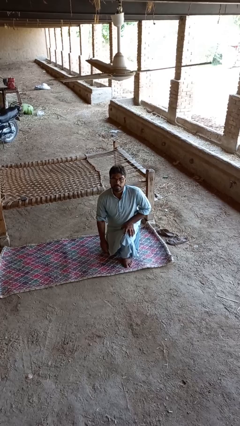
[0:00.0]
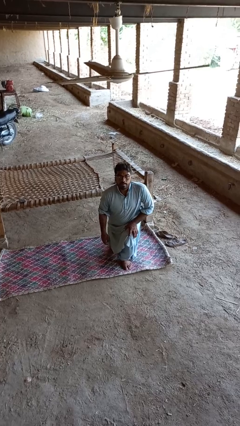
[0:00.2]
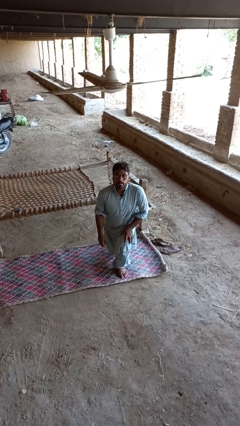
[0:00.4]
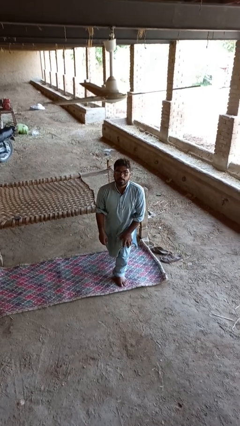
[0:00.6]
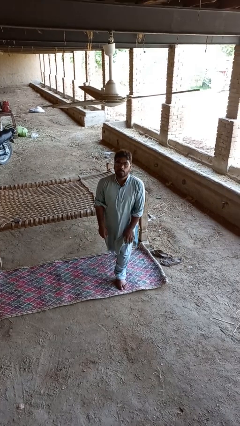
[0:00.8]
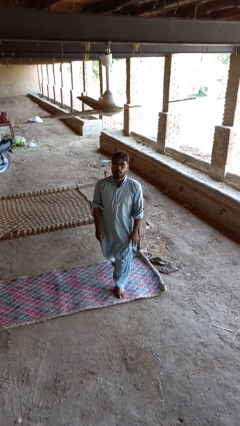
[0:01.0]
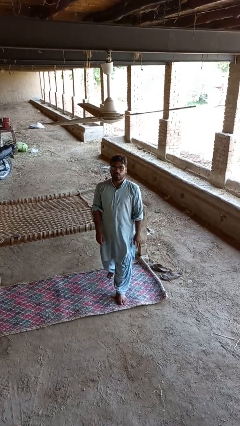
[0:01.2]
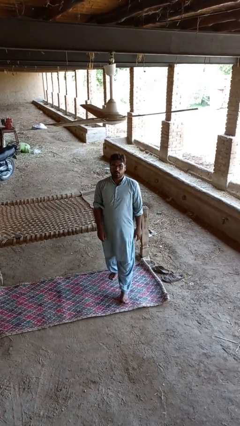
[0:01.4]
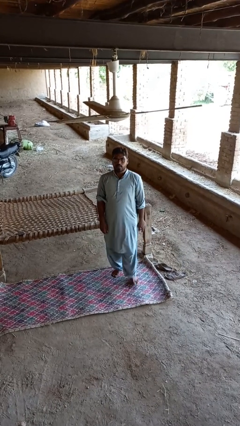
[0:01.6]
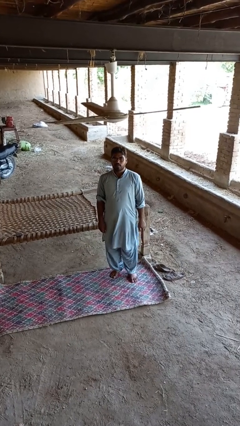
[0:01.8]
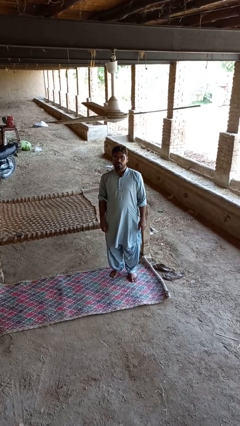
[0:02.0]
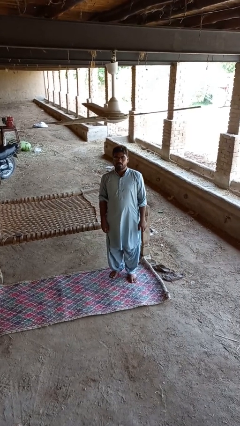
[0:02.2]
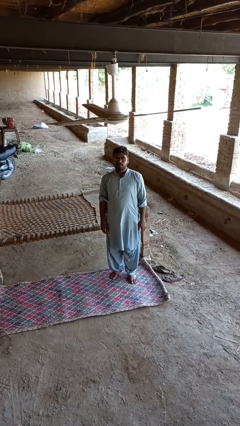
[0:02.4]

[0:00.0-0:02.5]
person stands up from floor

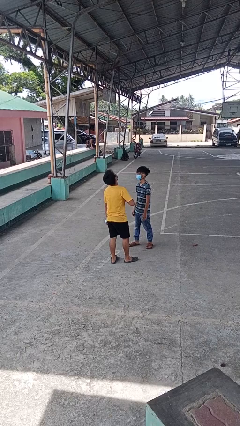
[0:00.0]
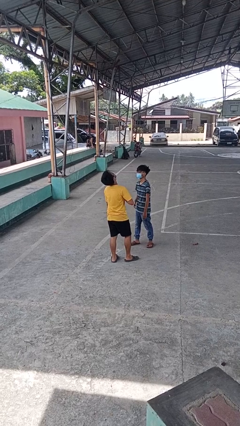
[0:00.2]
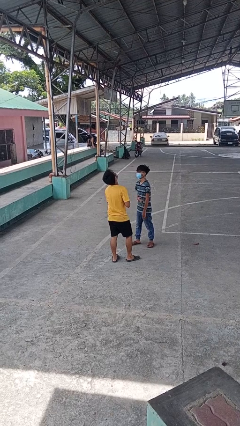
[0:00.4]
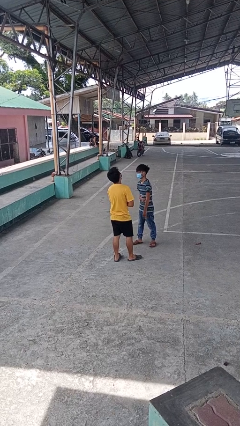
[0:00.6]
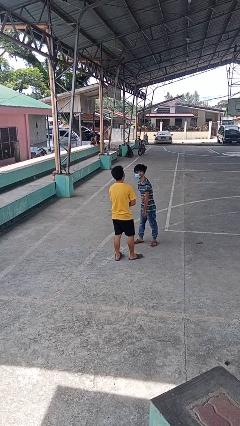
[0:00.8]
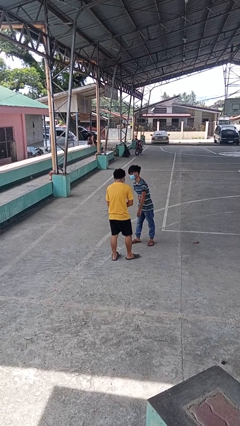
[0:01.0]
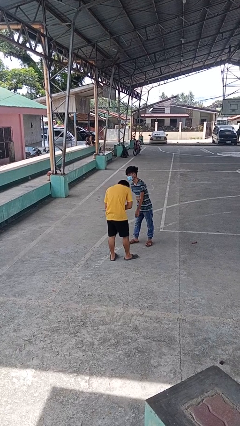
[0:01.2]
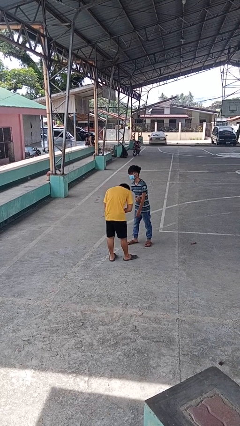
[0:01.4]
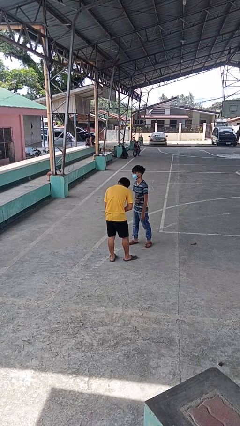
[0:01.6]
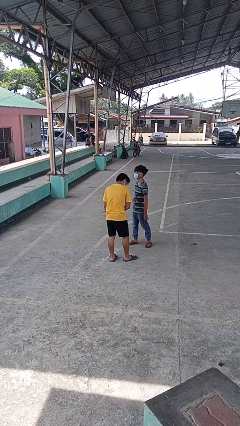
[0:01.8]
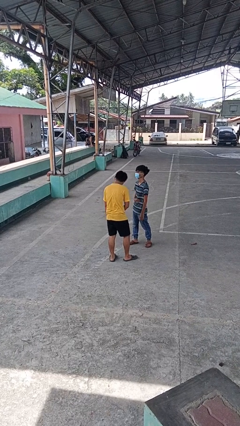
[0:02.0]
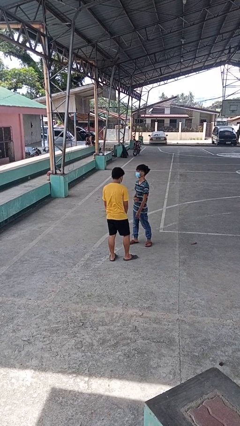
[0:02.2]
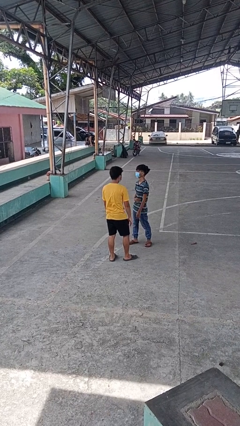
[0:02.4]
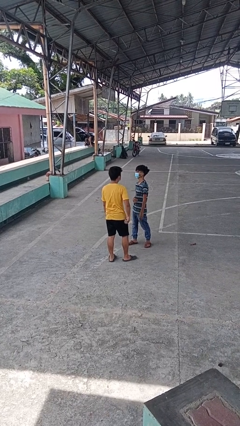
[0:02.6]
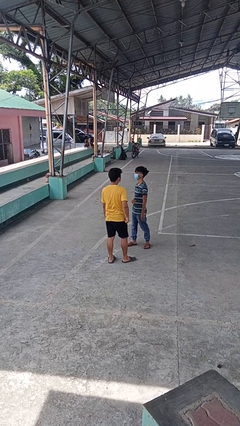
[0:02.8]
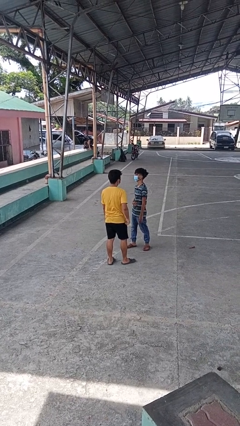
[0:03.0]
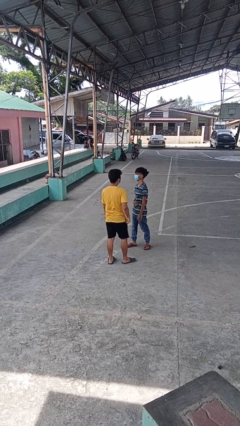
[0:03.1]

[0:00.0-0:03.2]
person laughs with person

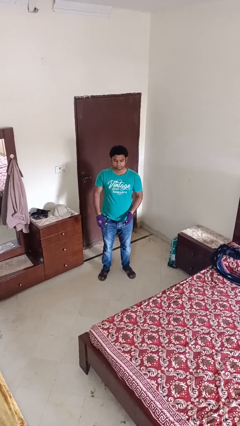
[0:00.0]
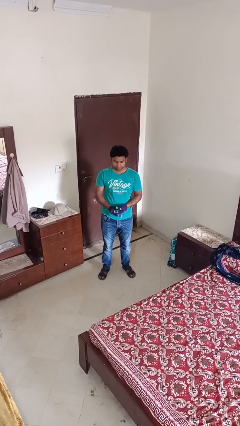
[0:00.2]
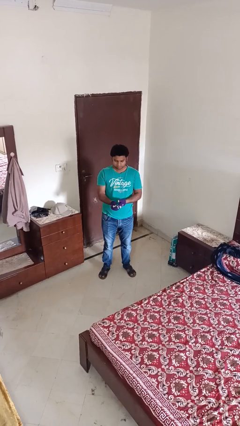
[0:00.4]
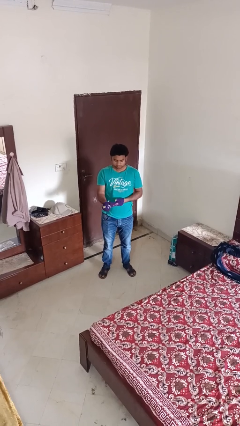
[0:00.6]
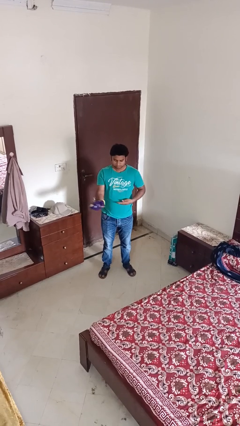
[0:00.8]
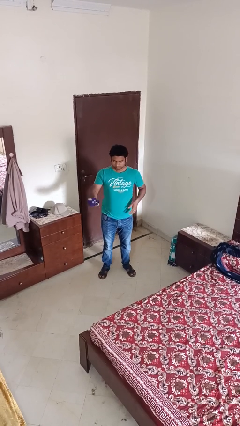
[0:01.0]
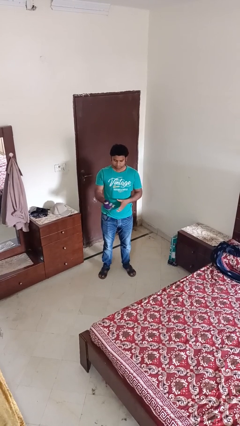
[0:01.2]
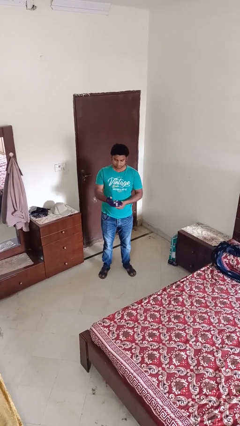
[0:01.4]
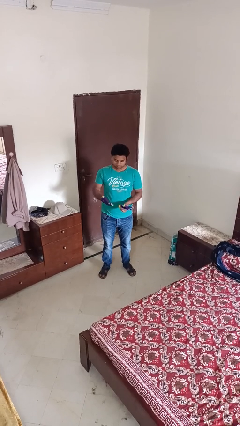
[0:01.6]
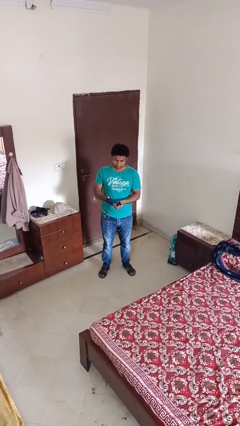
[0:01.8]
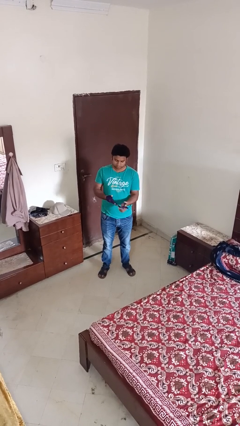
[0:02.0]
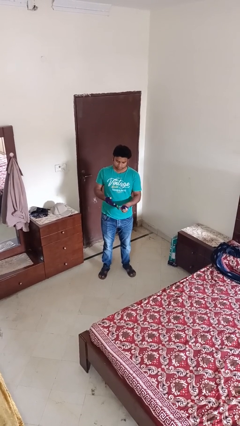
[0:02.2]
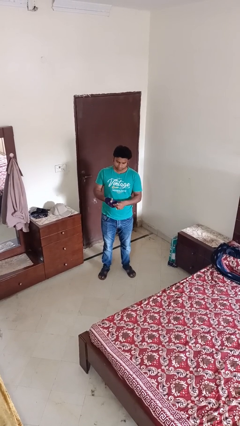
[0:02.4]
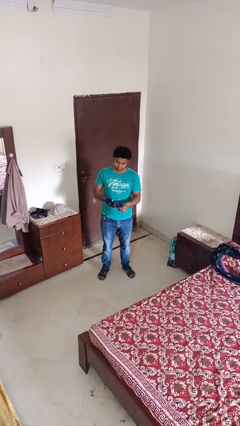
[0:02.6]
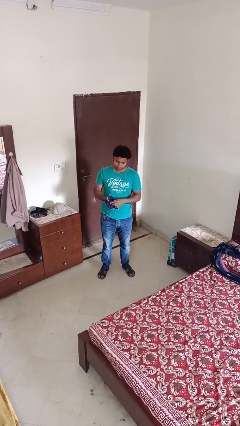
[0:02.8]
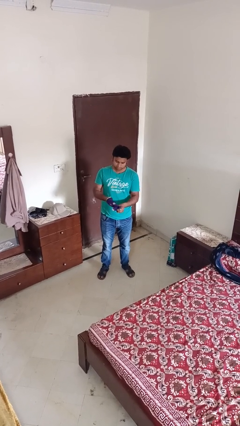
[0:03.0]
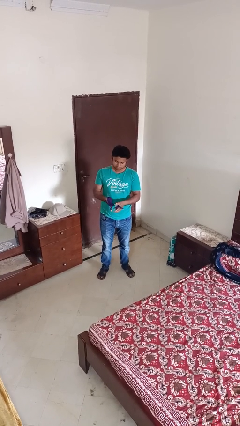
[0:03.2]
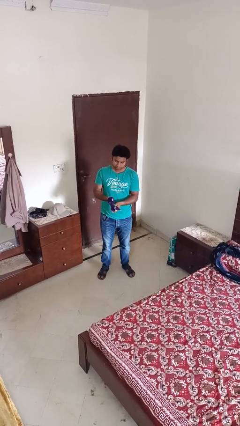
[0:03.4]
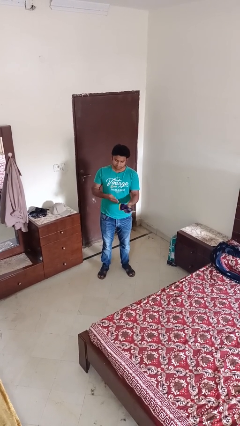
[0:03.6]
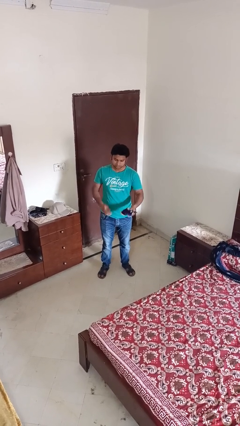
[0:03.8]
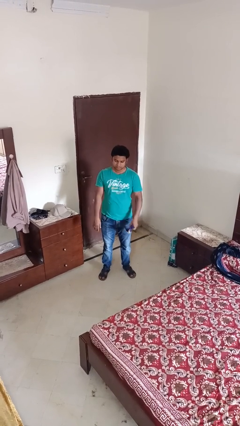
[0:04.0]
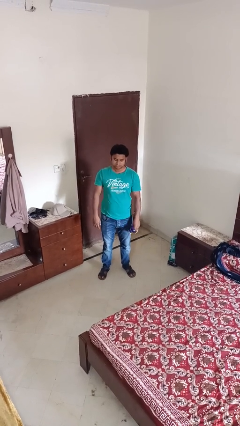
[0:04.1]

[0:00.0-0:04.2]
person takes off gloves

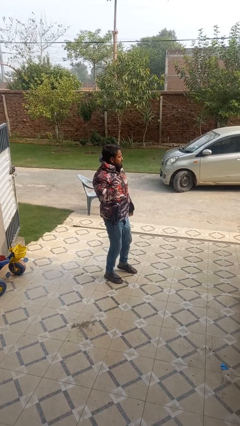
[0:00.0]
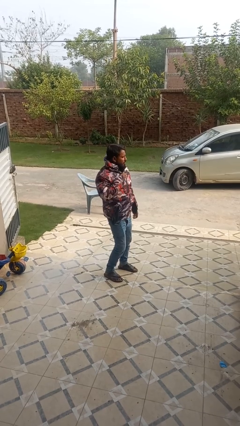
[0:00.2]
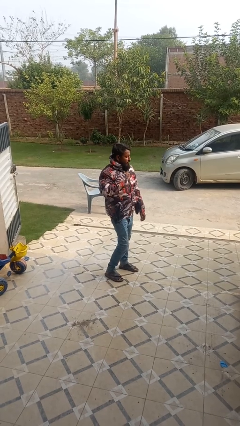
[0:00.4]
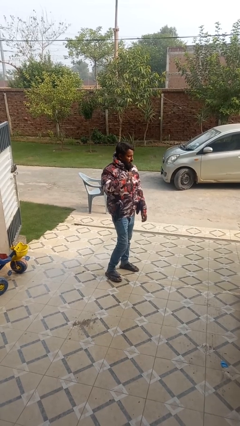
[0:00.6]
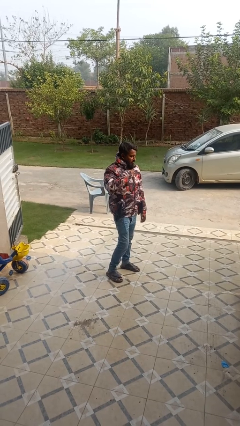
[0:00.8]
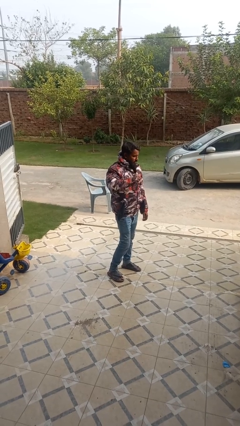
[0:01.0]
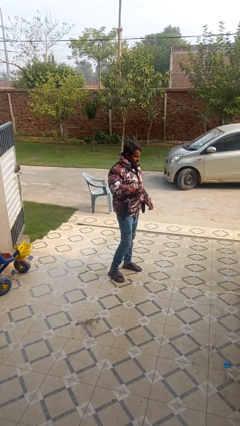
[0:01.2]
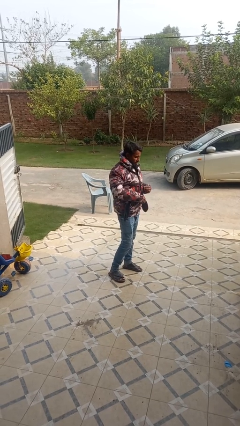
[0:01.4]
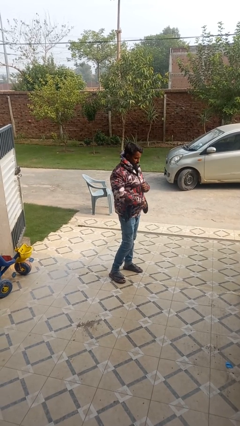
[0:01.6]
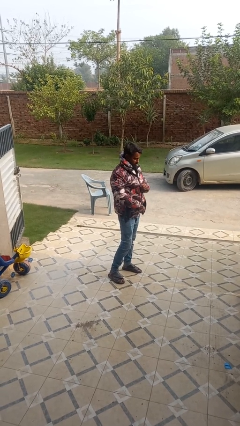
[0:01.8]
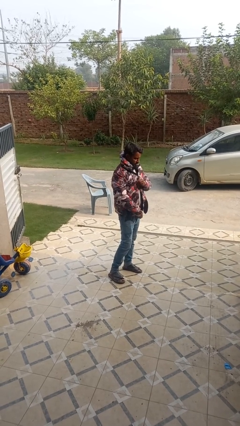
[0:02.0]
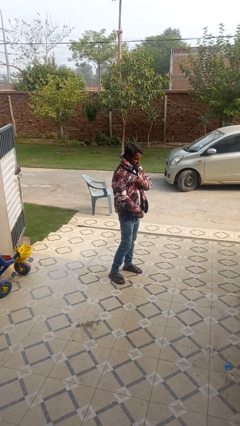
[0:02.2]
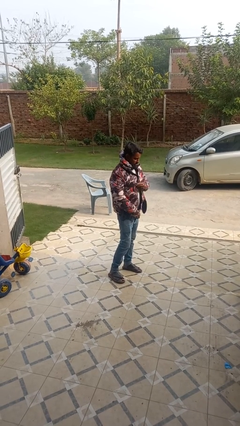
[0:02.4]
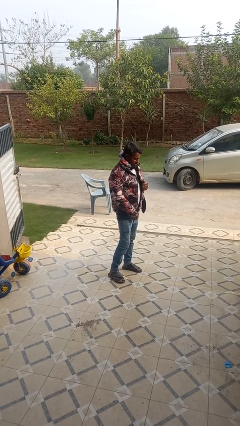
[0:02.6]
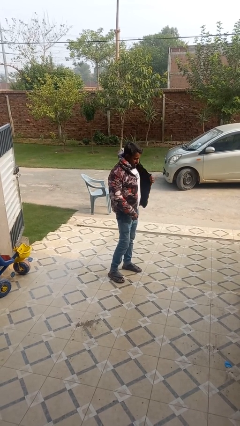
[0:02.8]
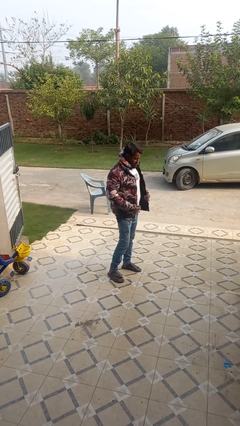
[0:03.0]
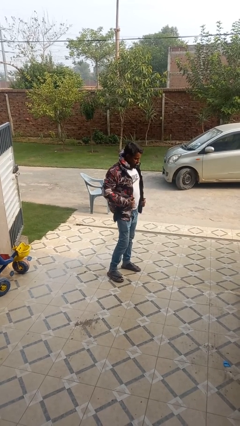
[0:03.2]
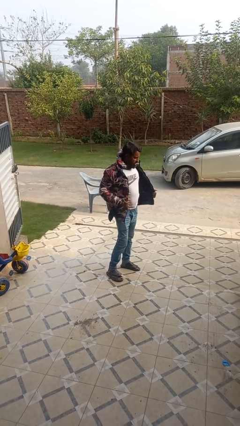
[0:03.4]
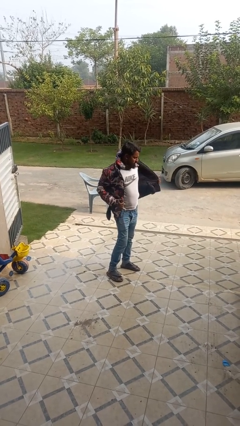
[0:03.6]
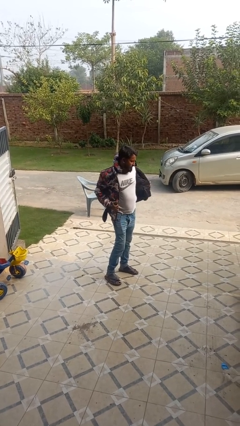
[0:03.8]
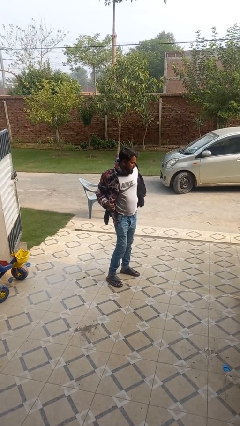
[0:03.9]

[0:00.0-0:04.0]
person unzips jacket

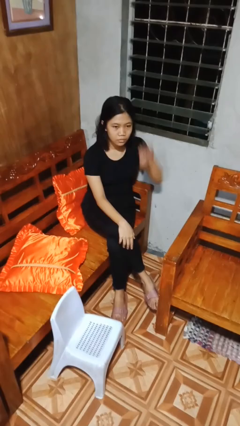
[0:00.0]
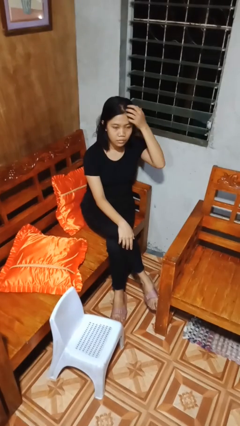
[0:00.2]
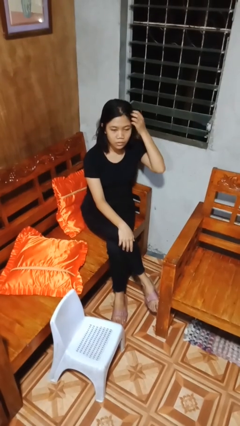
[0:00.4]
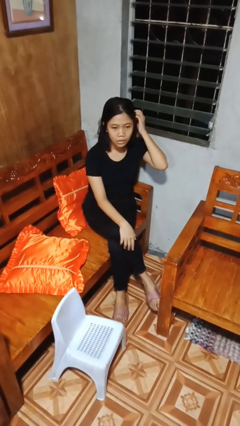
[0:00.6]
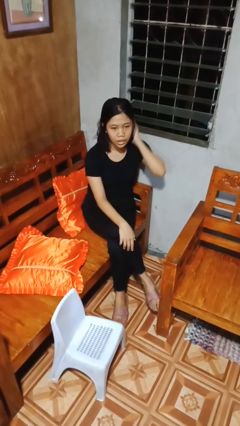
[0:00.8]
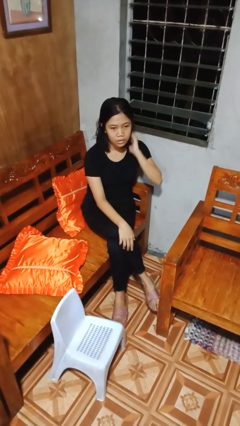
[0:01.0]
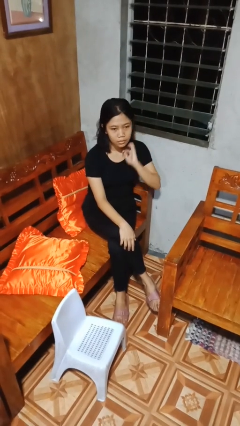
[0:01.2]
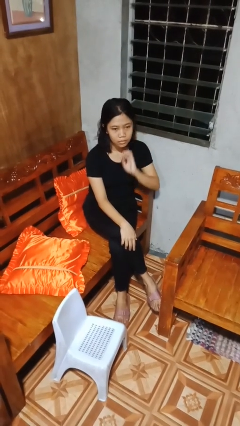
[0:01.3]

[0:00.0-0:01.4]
person strokes hair

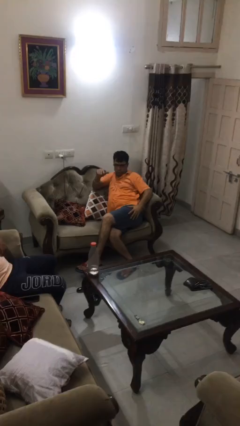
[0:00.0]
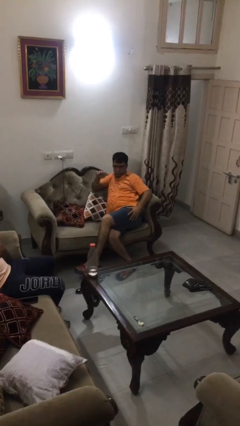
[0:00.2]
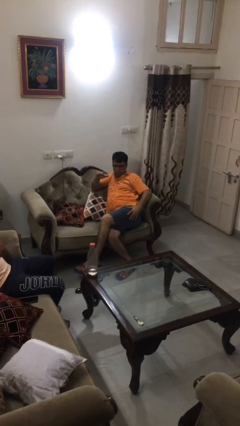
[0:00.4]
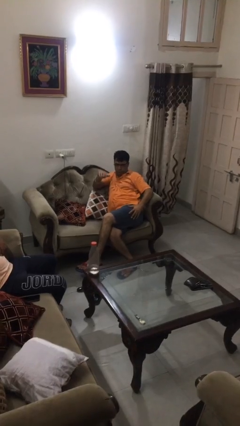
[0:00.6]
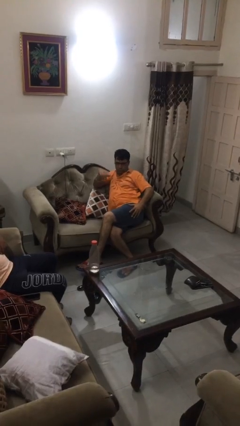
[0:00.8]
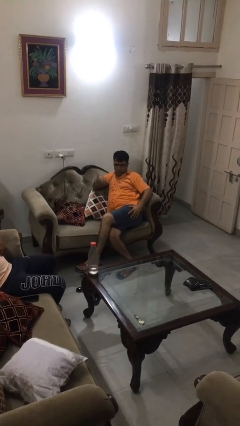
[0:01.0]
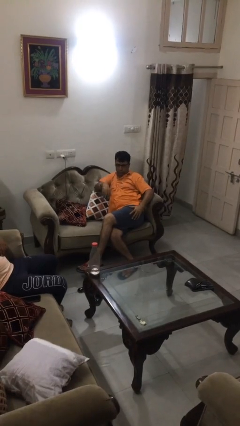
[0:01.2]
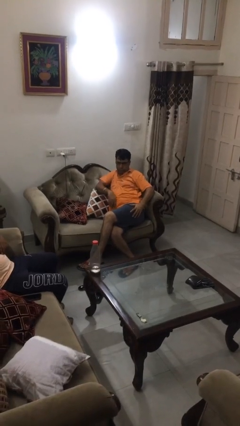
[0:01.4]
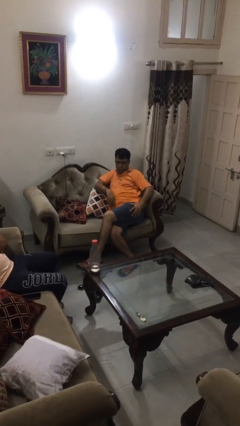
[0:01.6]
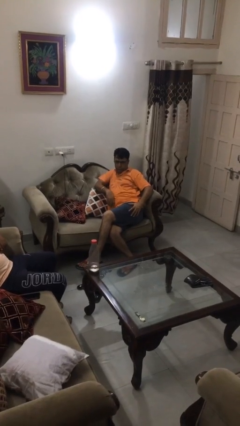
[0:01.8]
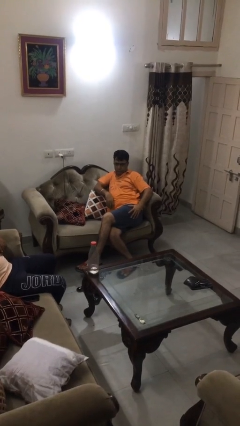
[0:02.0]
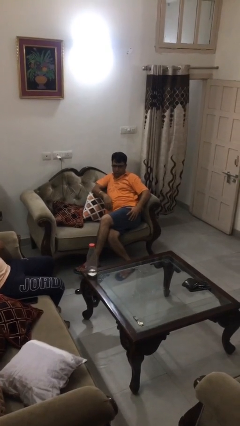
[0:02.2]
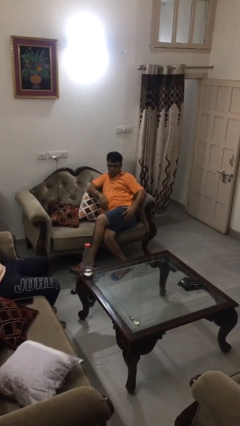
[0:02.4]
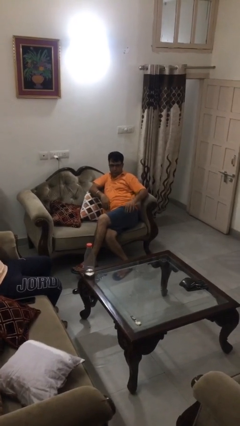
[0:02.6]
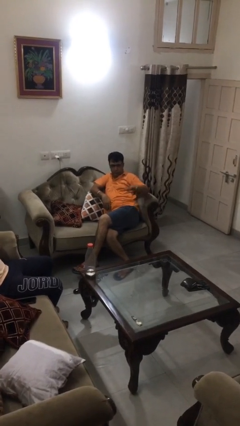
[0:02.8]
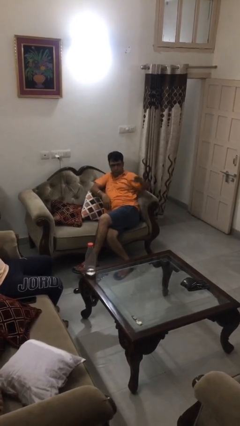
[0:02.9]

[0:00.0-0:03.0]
person gestures come here
